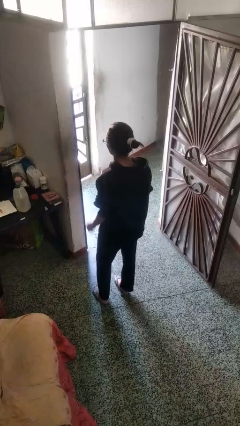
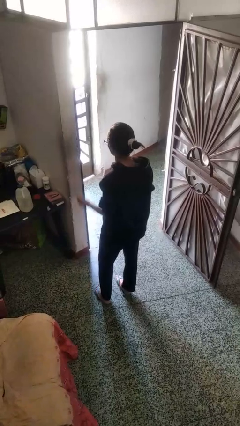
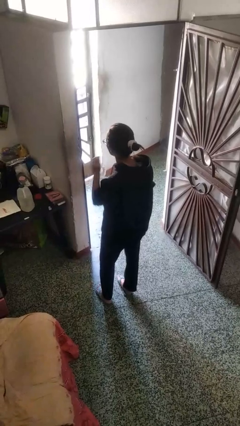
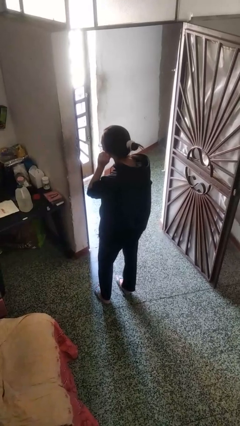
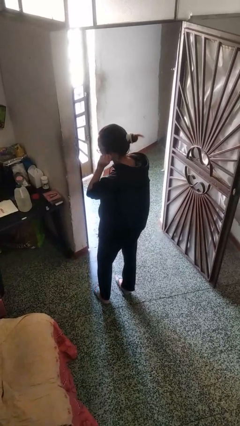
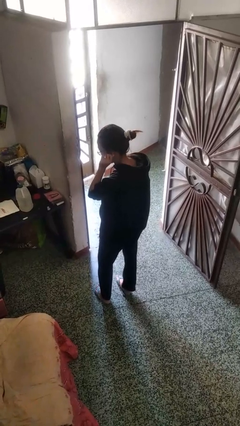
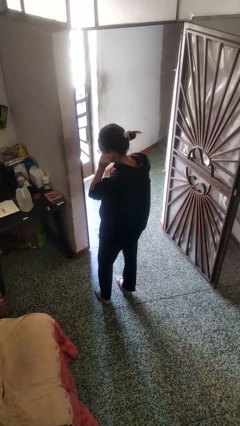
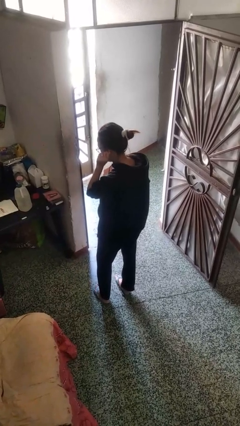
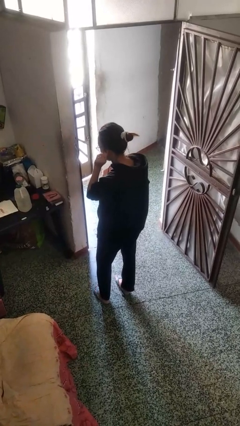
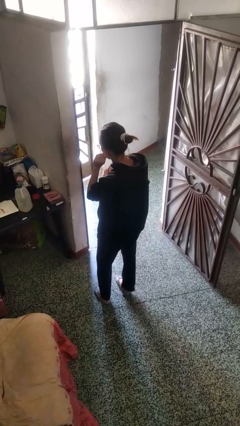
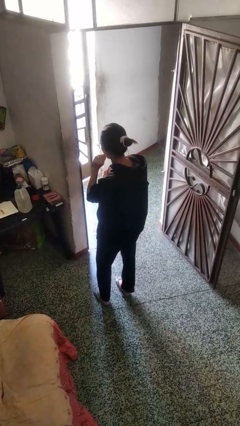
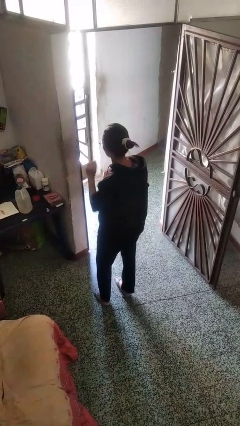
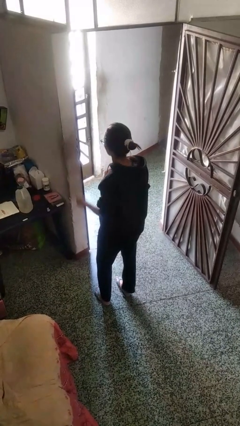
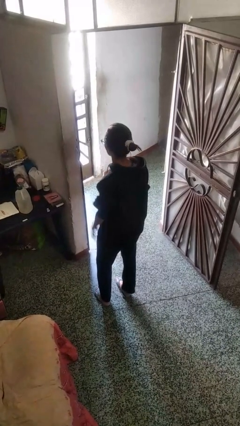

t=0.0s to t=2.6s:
person touches earlobe

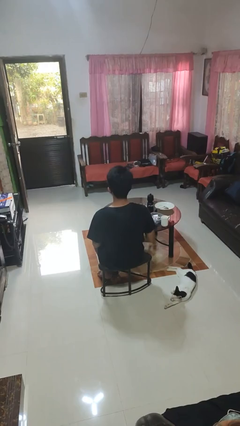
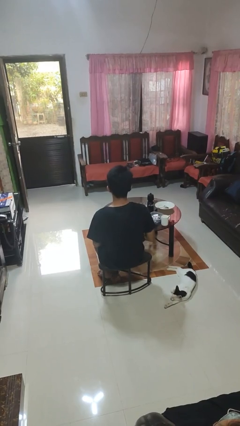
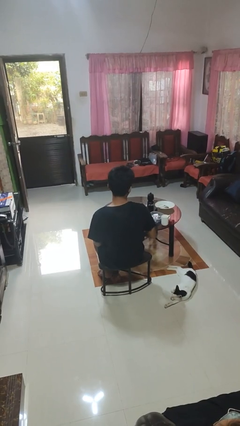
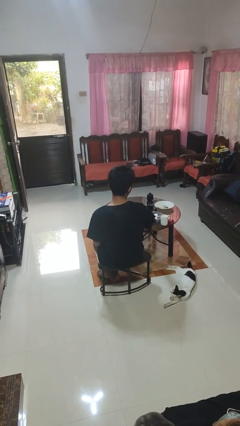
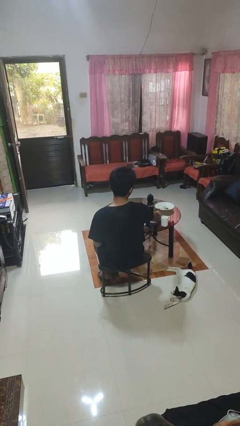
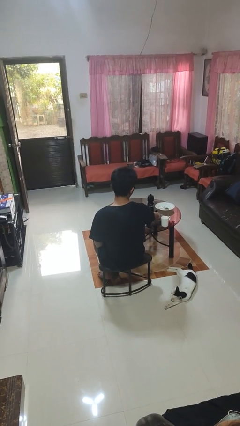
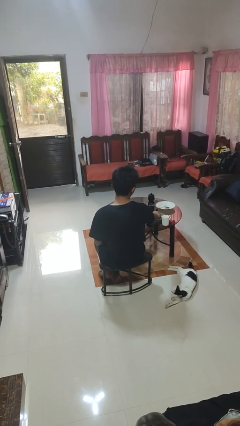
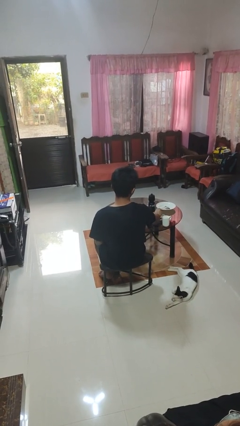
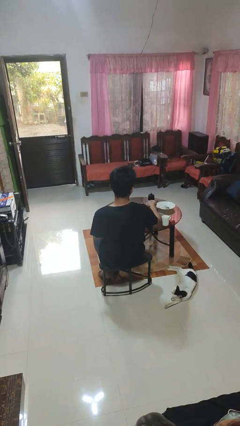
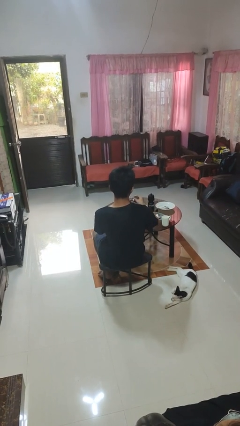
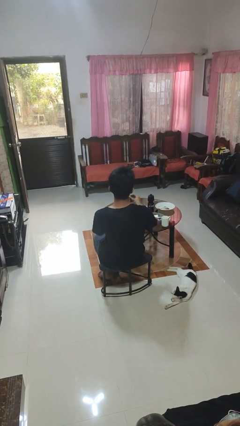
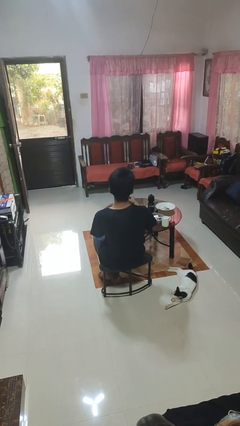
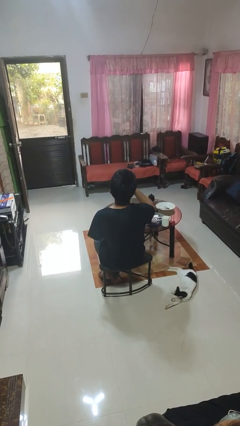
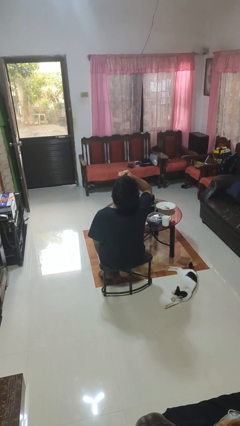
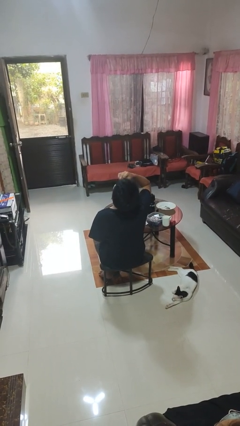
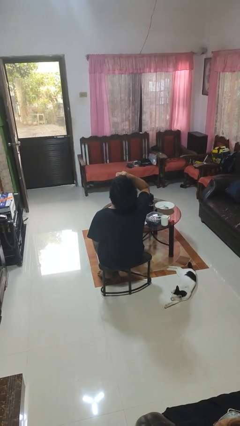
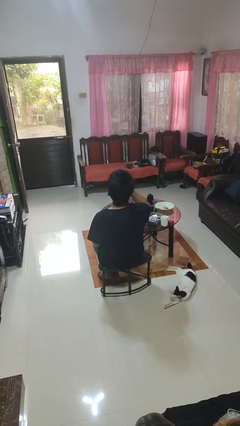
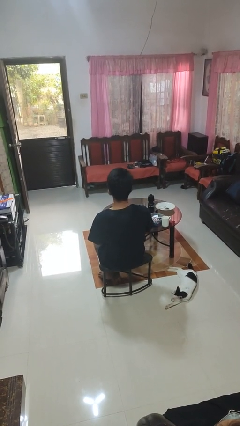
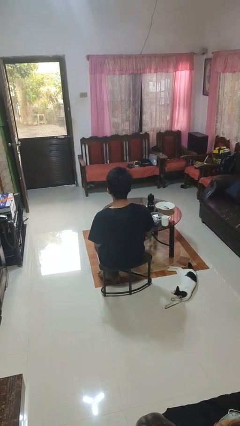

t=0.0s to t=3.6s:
person takes medicine pills

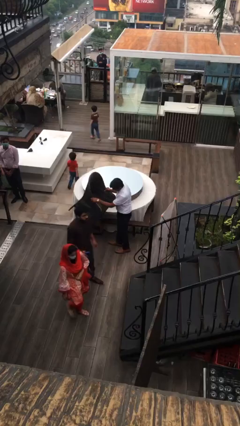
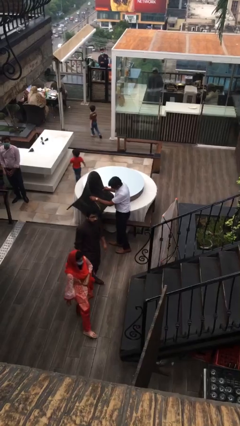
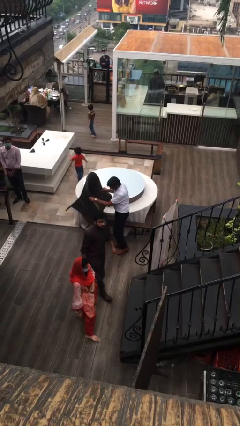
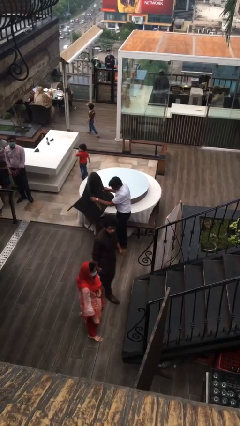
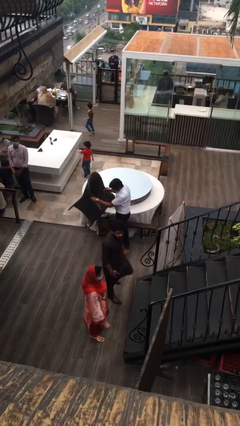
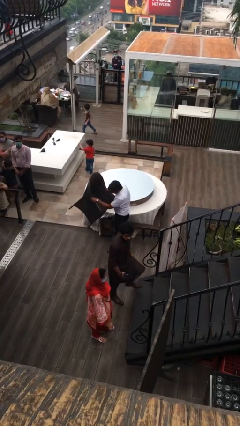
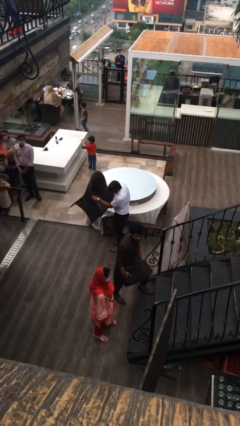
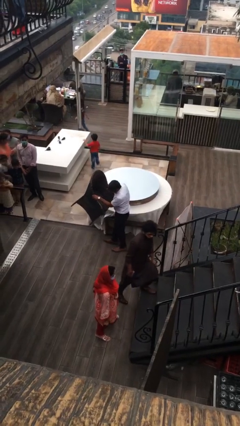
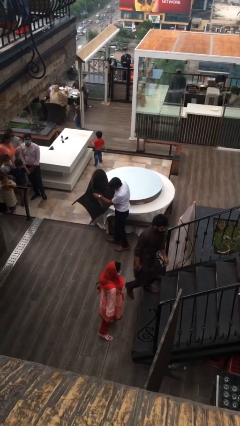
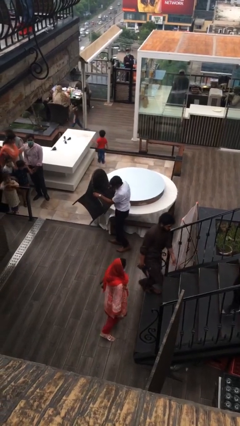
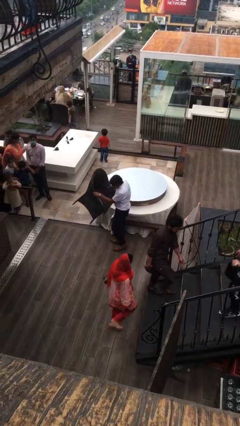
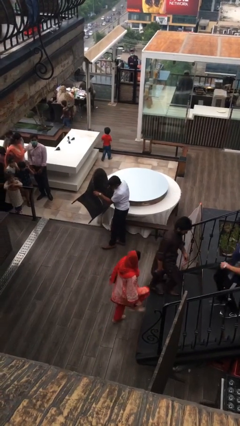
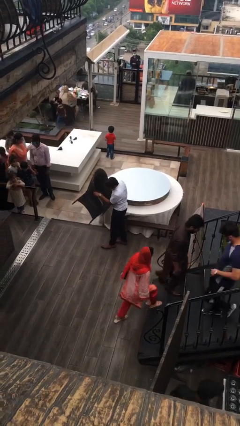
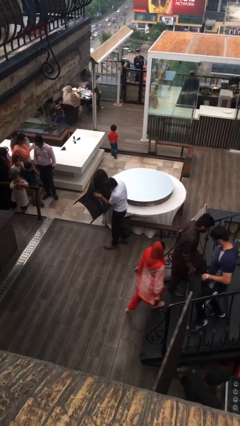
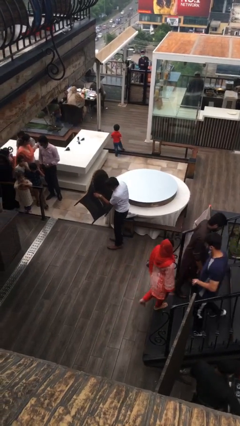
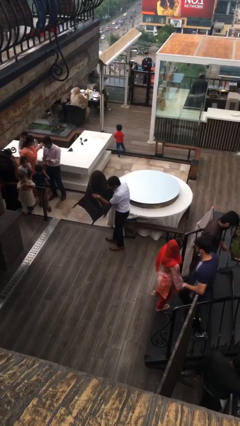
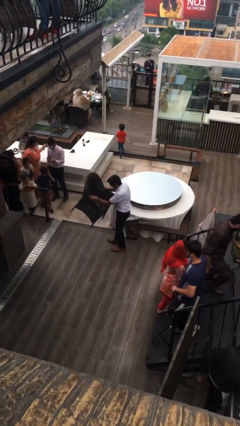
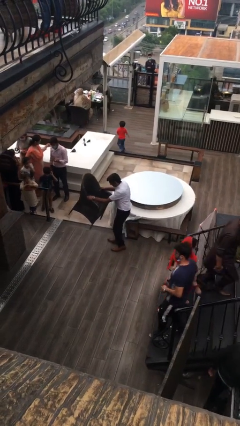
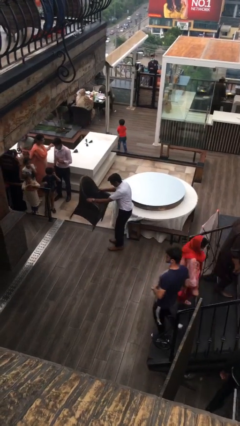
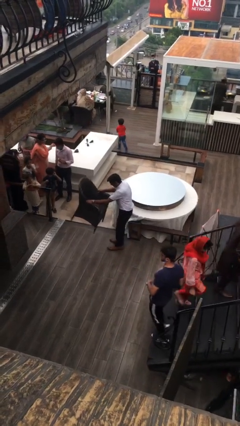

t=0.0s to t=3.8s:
person carries heavy object

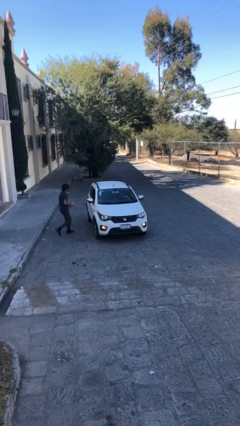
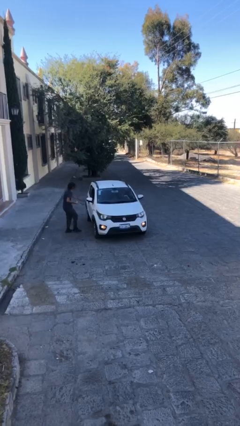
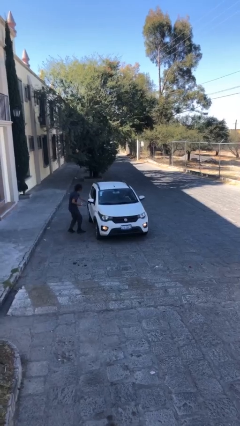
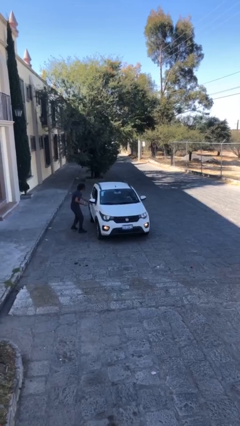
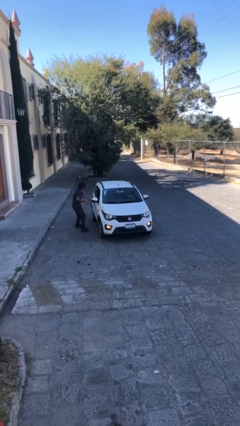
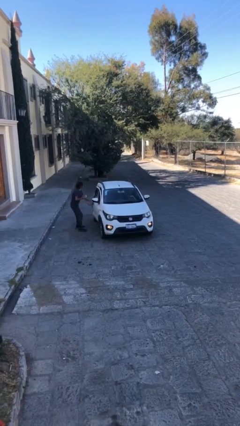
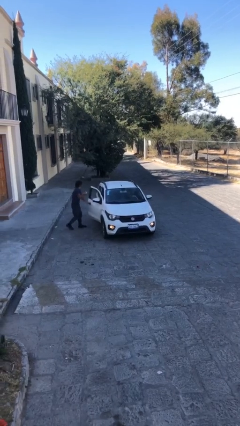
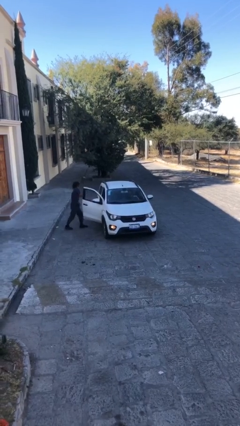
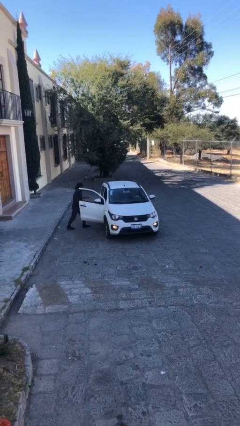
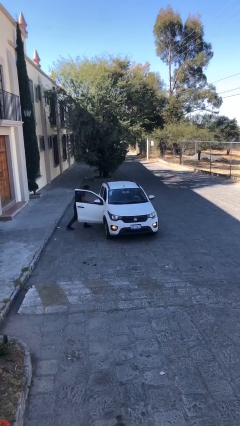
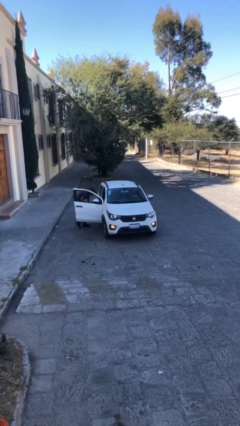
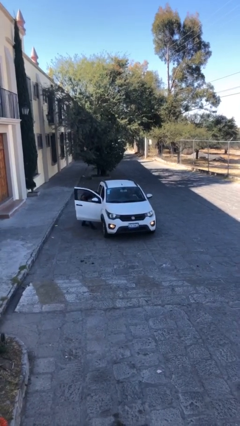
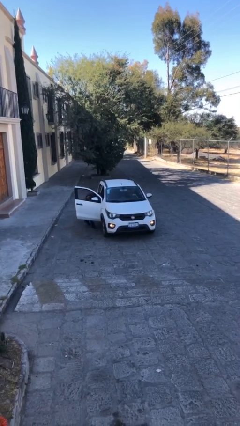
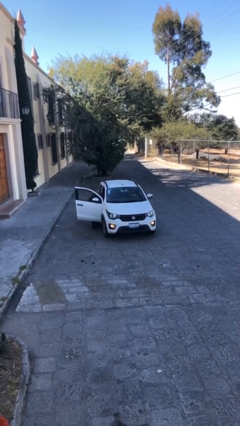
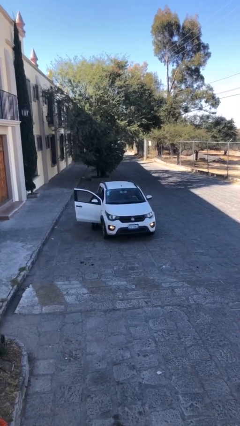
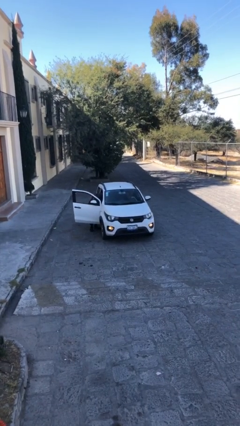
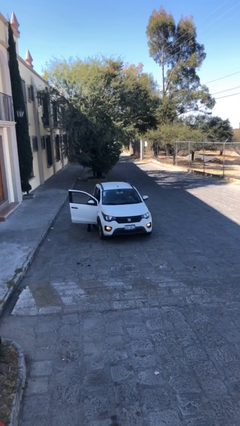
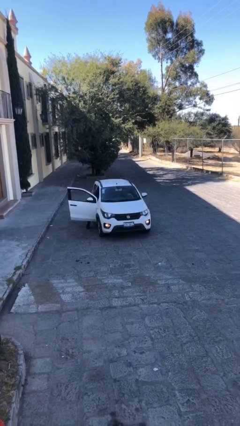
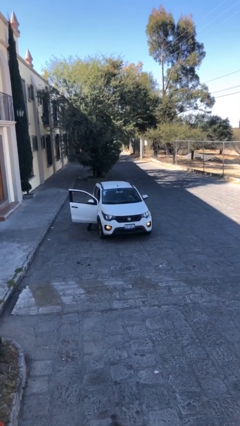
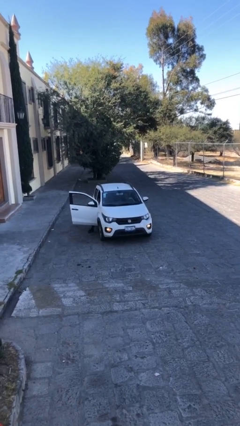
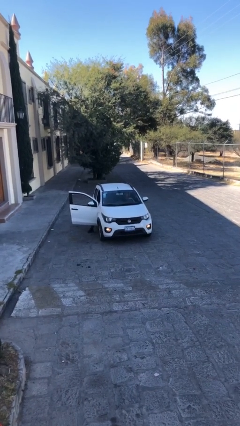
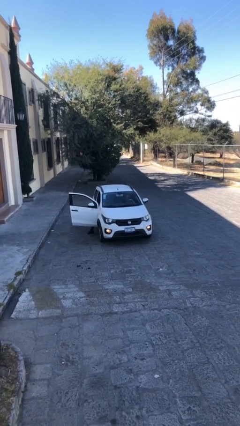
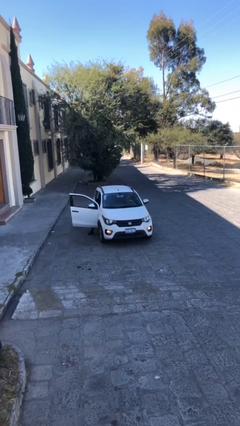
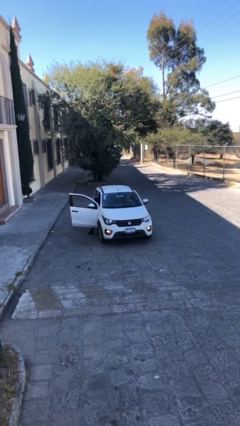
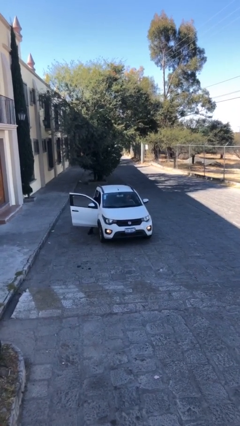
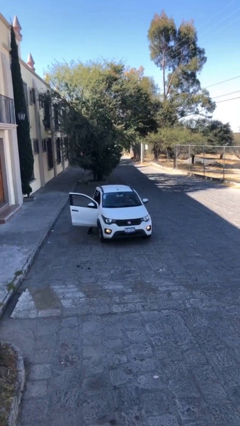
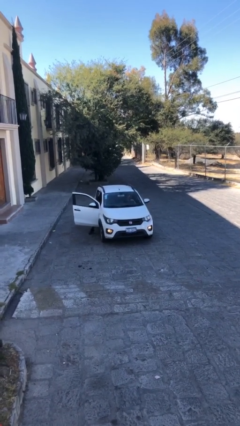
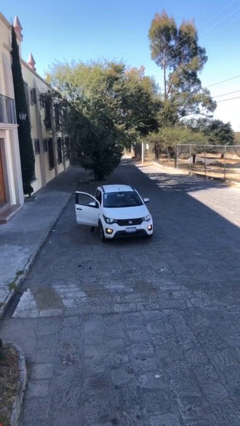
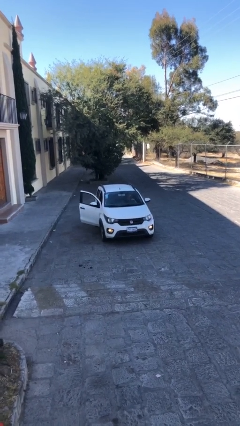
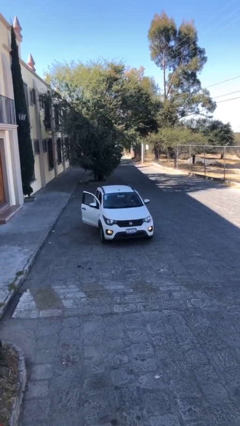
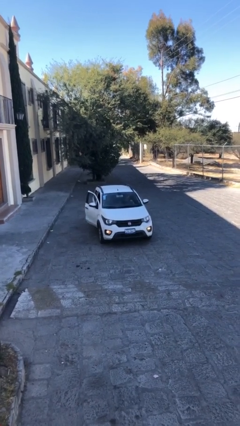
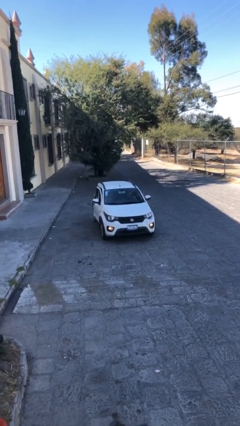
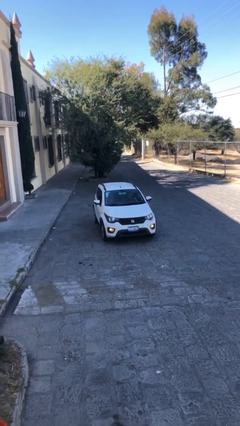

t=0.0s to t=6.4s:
car picks up person

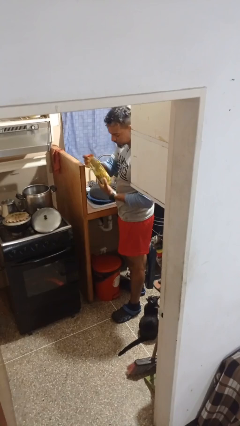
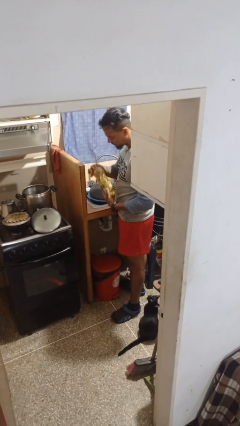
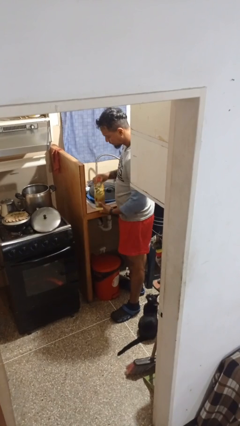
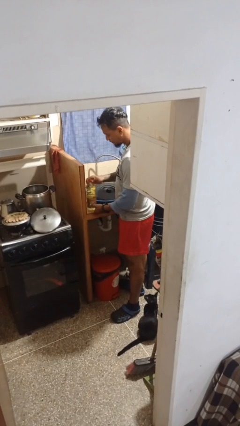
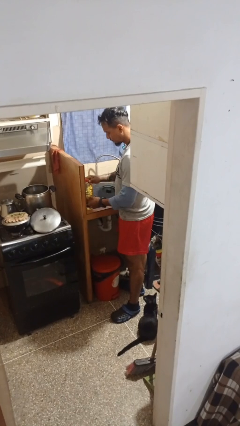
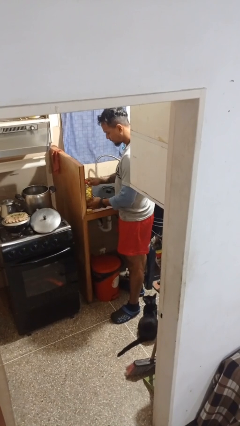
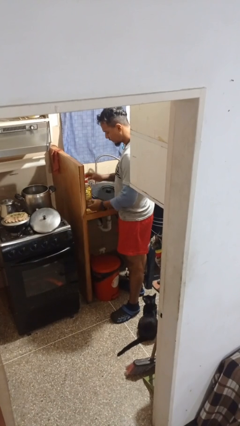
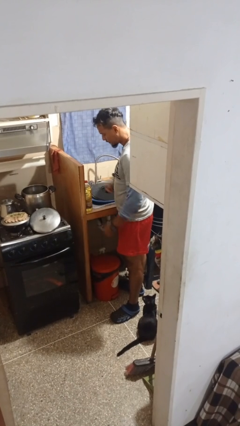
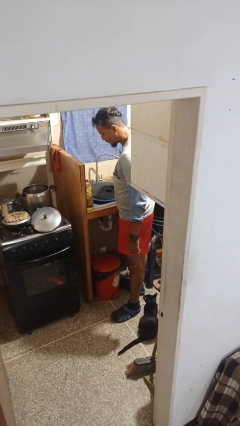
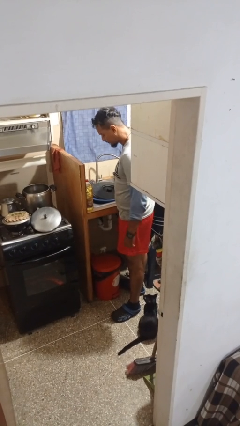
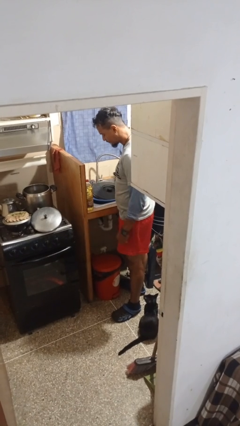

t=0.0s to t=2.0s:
person puts down object on countertop
